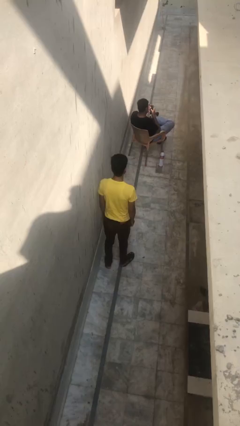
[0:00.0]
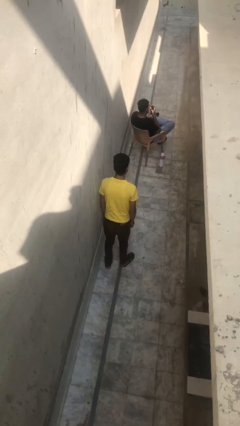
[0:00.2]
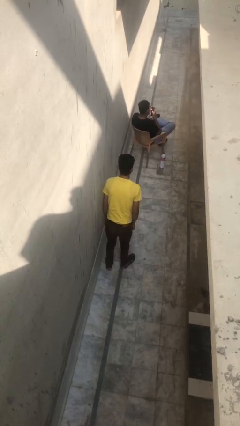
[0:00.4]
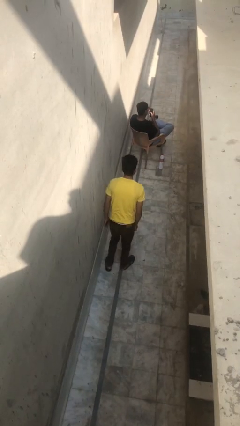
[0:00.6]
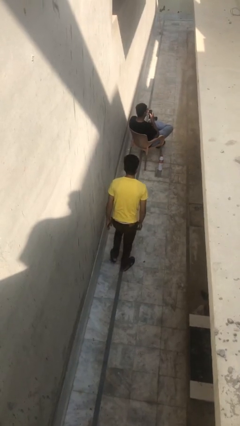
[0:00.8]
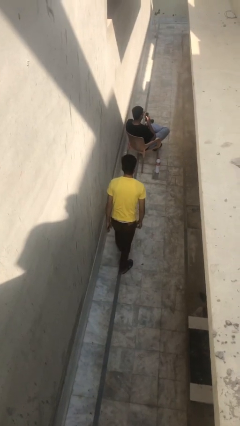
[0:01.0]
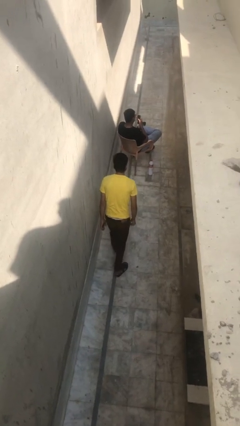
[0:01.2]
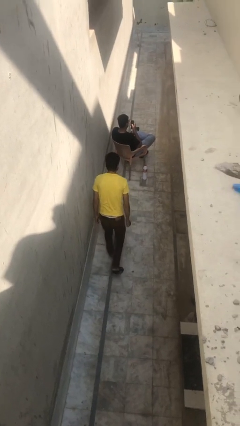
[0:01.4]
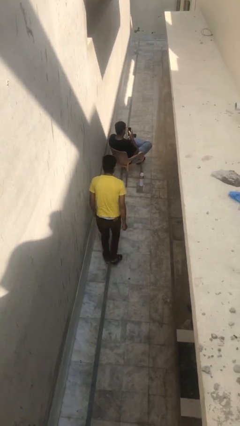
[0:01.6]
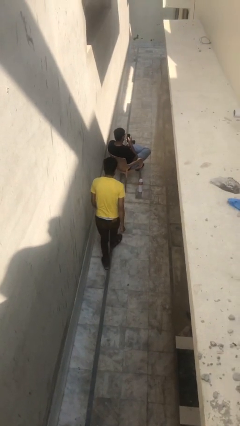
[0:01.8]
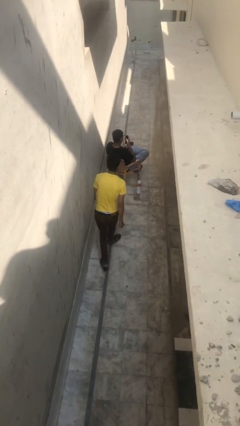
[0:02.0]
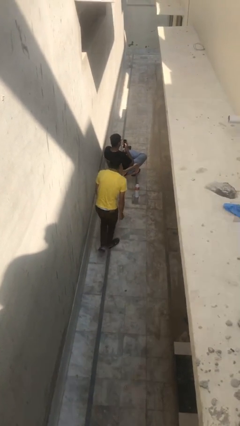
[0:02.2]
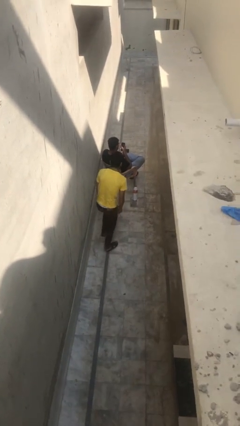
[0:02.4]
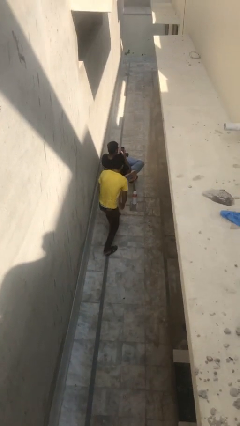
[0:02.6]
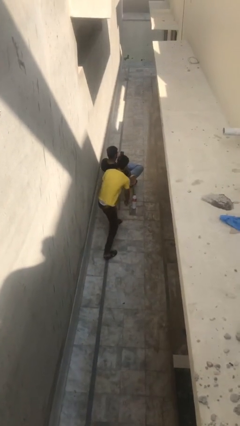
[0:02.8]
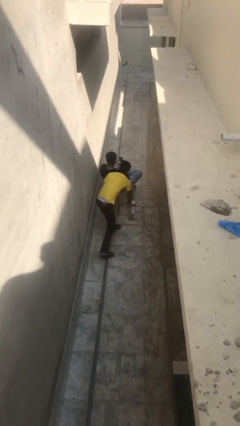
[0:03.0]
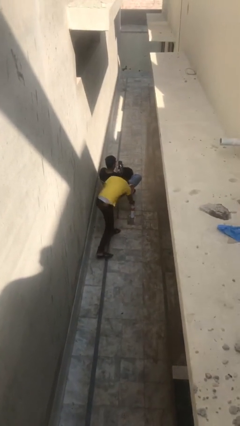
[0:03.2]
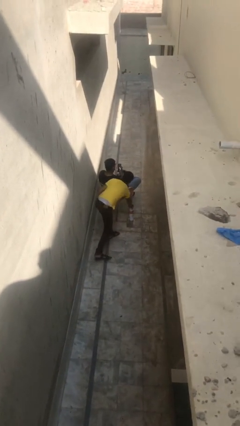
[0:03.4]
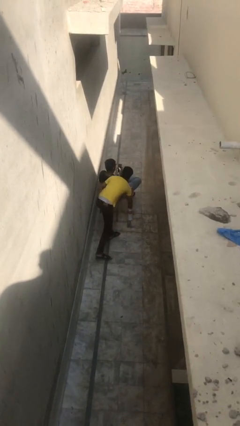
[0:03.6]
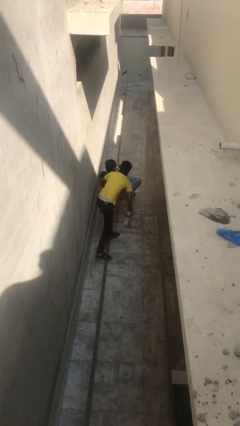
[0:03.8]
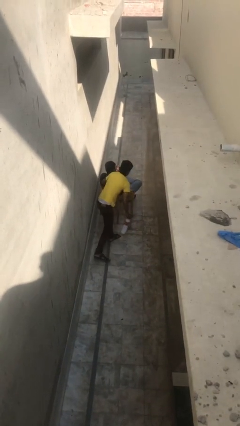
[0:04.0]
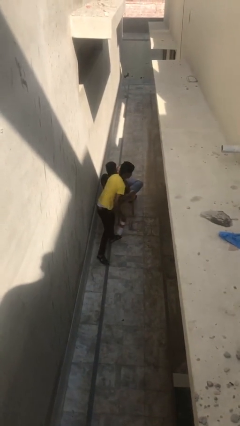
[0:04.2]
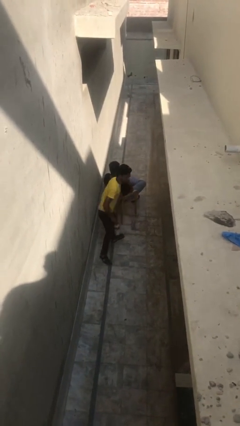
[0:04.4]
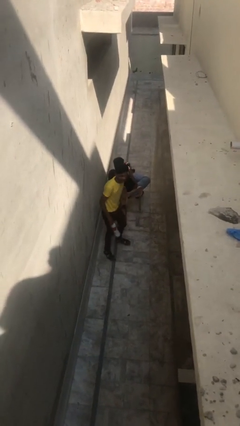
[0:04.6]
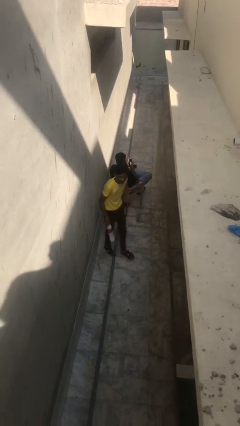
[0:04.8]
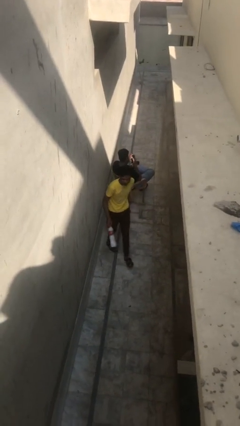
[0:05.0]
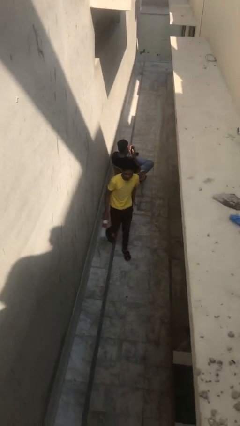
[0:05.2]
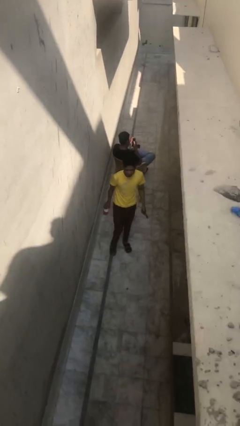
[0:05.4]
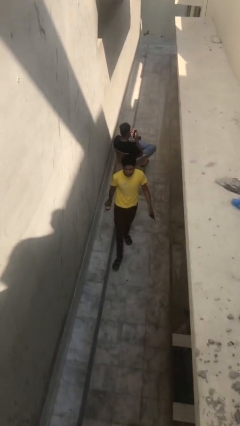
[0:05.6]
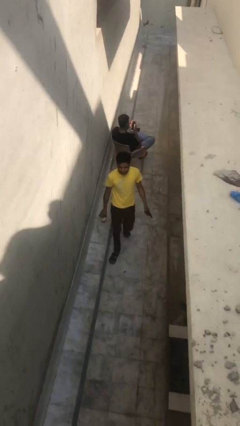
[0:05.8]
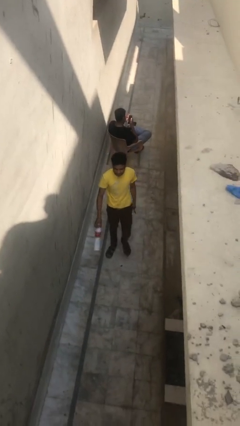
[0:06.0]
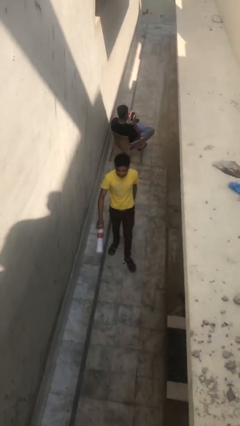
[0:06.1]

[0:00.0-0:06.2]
person steals object from person

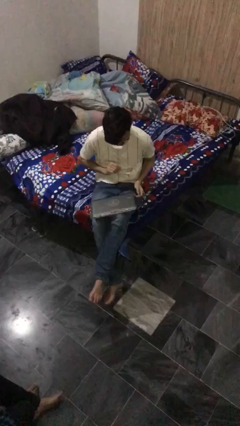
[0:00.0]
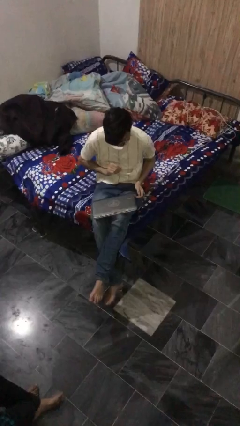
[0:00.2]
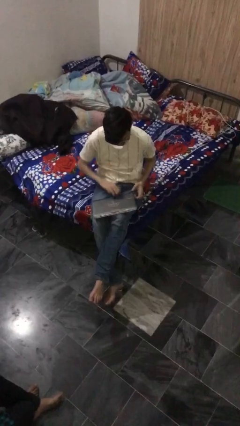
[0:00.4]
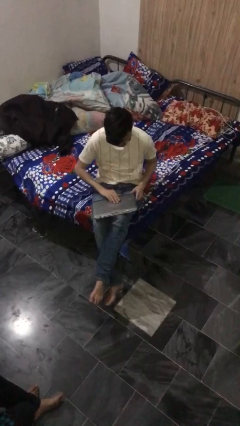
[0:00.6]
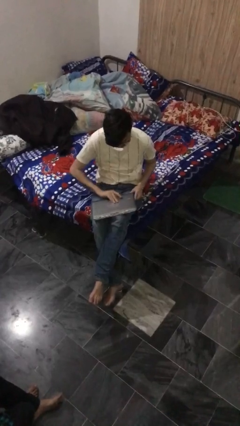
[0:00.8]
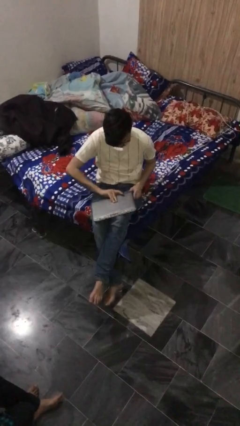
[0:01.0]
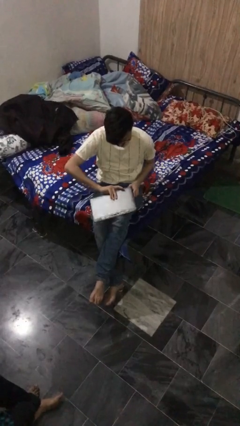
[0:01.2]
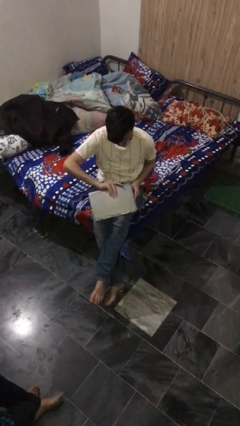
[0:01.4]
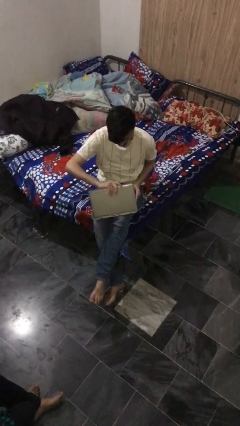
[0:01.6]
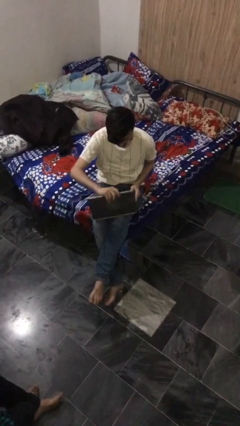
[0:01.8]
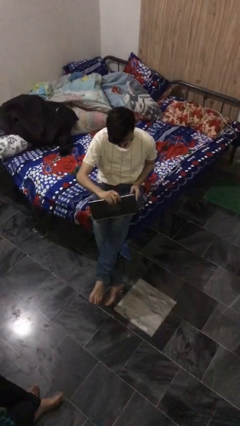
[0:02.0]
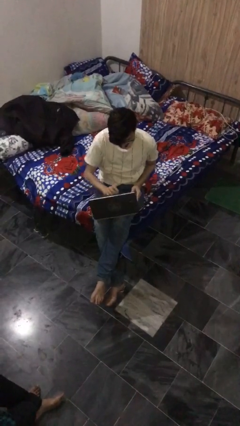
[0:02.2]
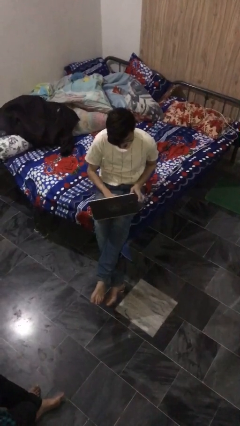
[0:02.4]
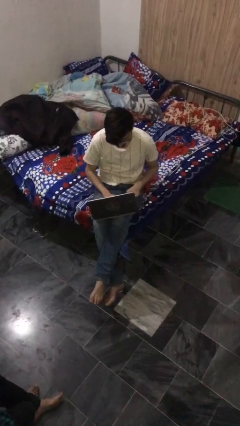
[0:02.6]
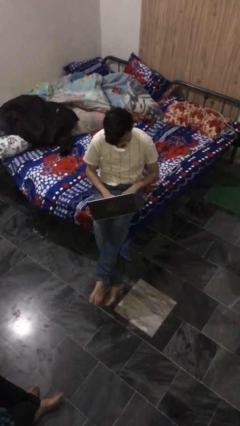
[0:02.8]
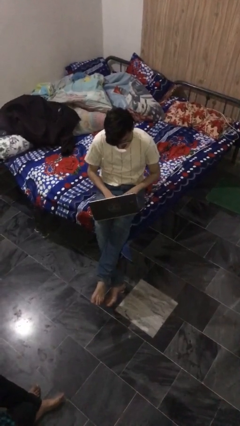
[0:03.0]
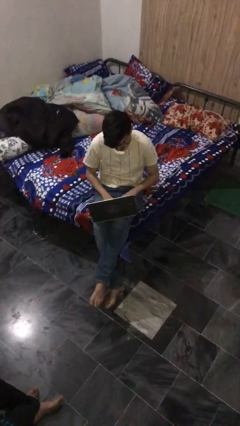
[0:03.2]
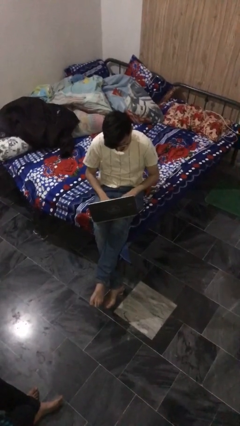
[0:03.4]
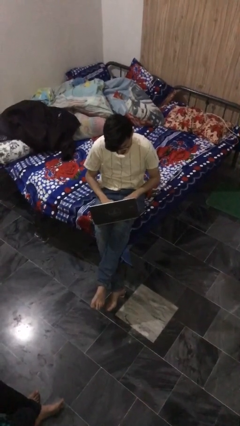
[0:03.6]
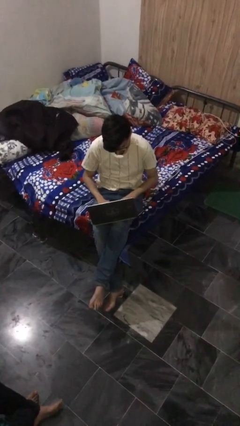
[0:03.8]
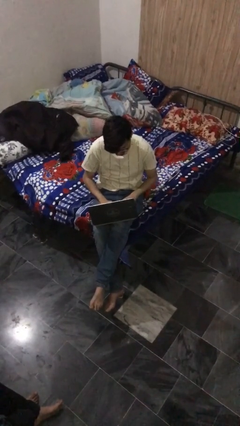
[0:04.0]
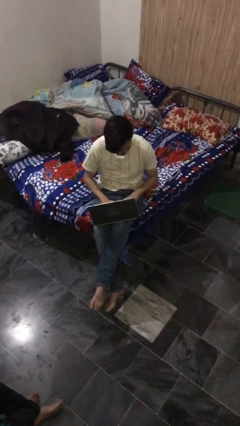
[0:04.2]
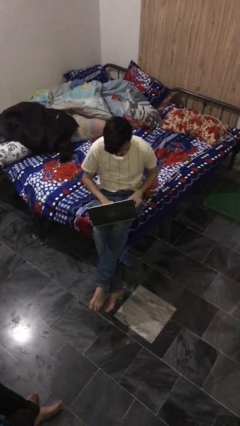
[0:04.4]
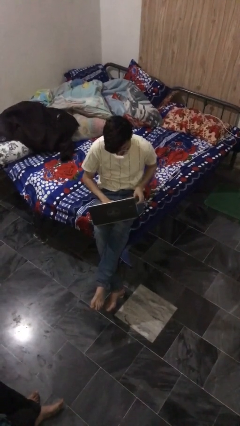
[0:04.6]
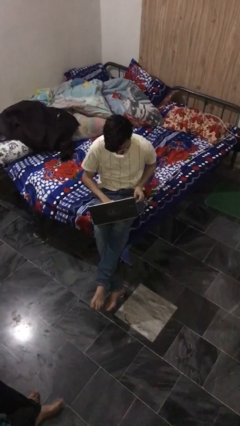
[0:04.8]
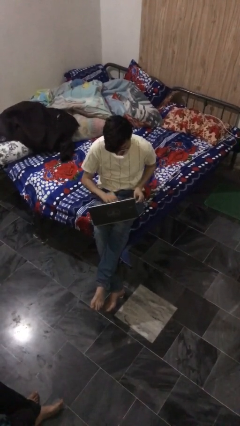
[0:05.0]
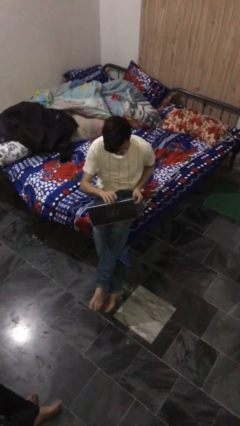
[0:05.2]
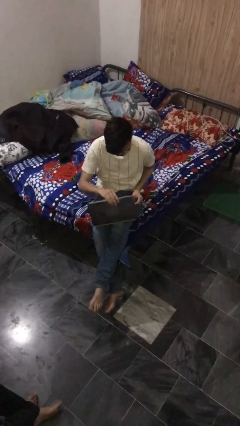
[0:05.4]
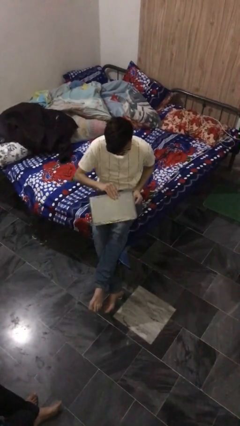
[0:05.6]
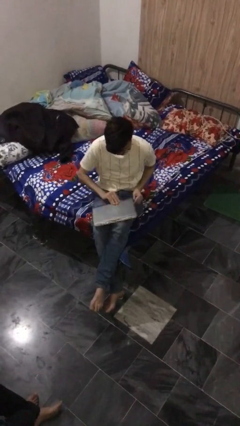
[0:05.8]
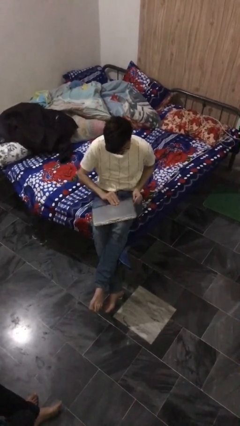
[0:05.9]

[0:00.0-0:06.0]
person interacts with laptop

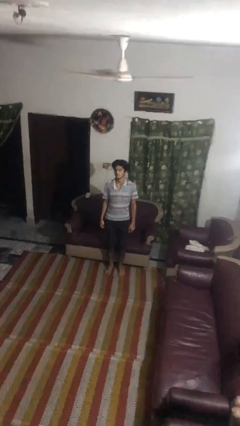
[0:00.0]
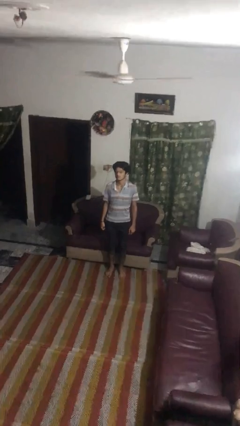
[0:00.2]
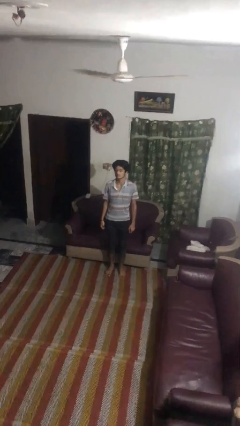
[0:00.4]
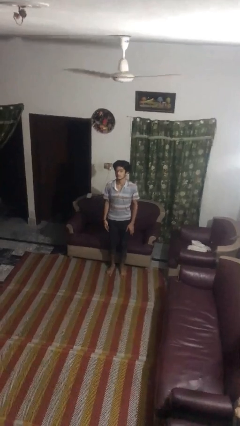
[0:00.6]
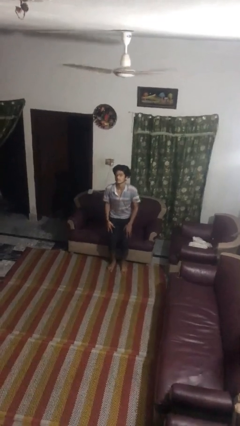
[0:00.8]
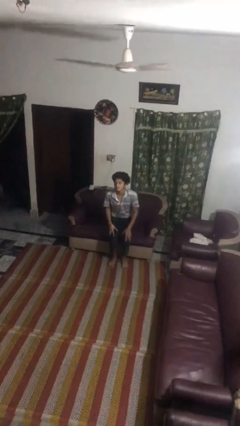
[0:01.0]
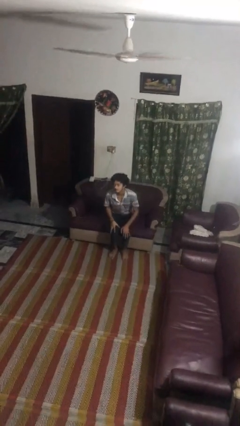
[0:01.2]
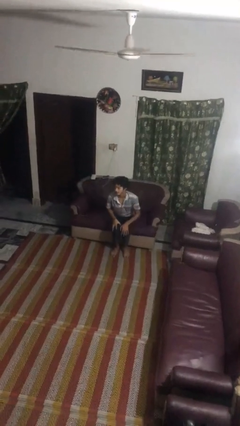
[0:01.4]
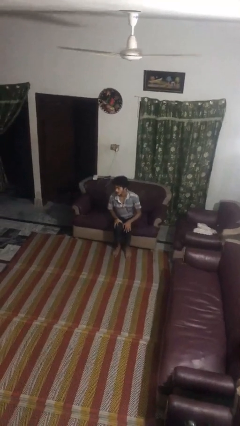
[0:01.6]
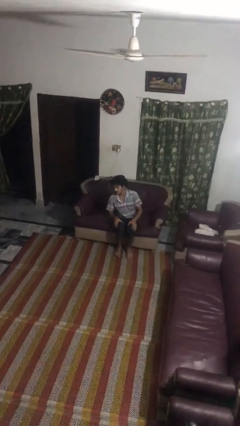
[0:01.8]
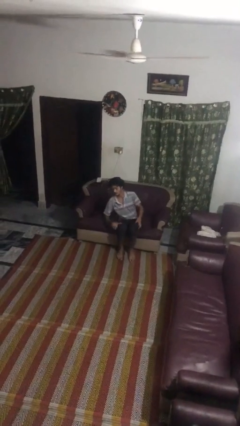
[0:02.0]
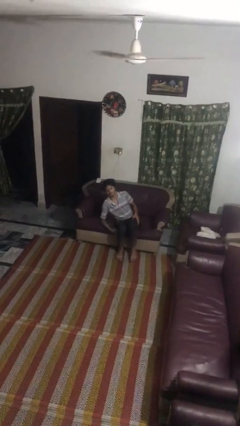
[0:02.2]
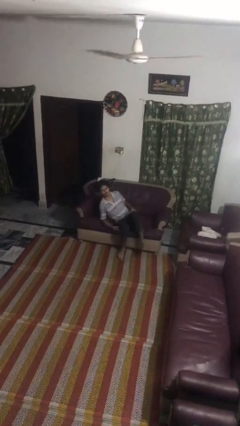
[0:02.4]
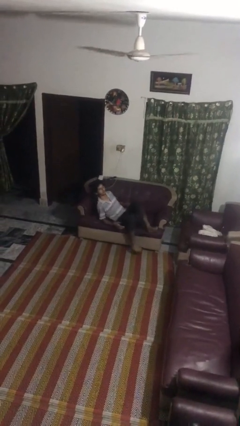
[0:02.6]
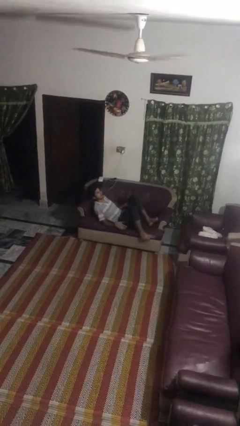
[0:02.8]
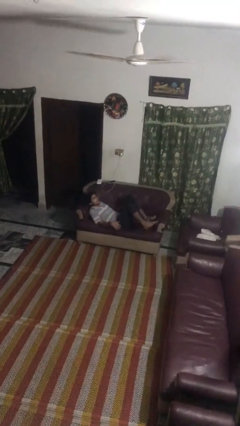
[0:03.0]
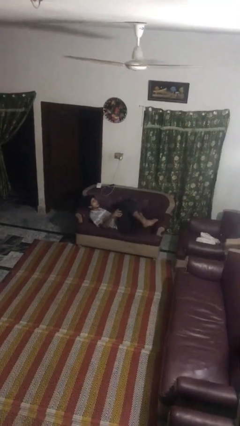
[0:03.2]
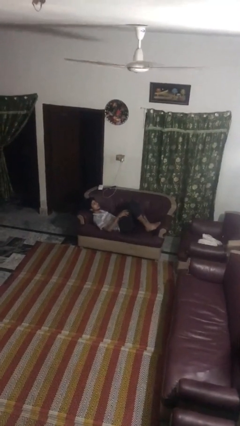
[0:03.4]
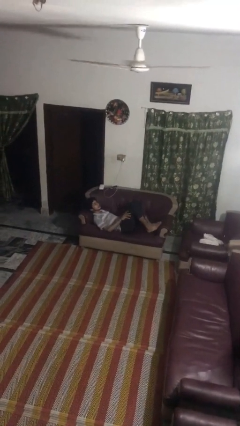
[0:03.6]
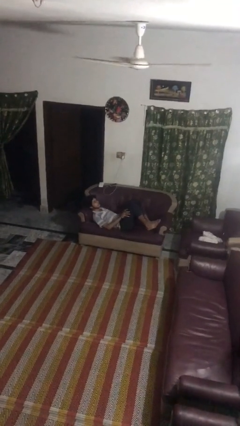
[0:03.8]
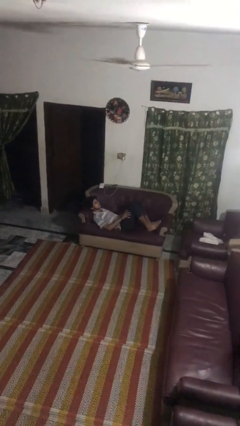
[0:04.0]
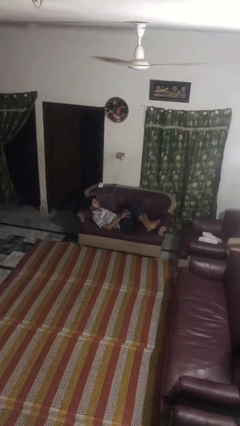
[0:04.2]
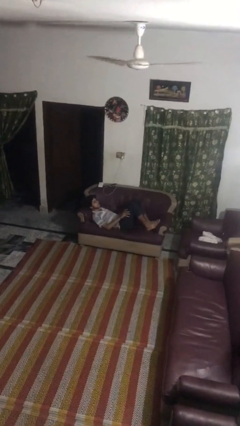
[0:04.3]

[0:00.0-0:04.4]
person lies down on couch

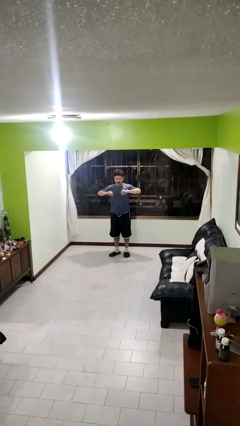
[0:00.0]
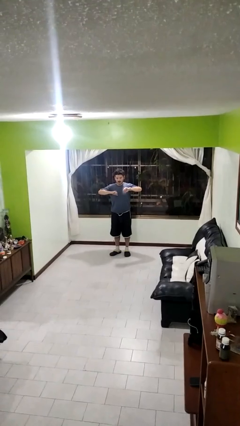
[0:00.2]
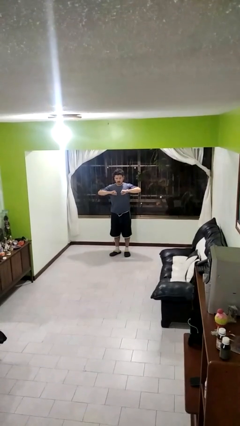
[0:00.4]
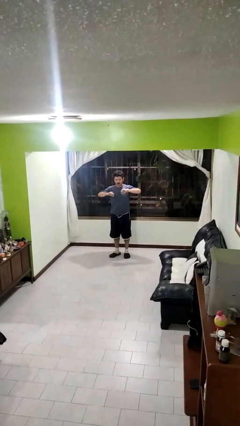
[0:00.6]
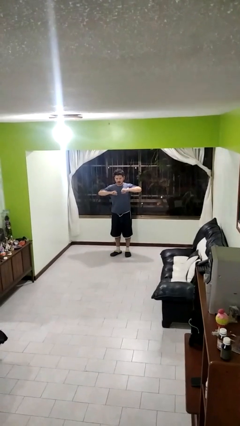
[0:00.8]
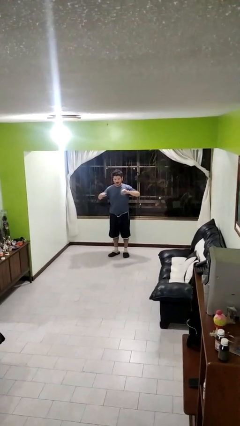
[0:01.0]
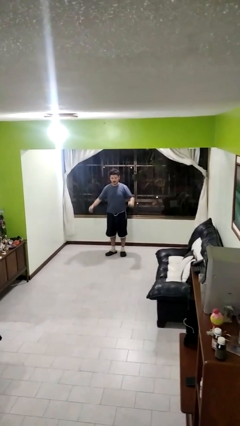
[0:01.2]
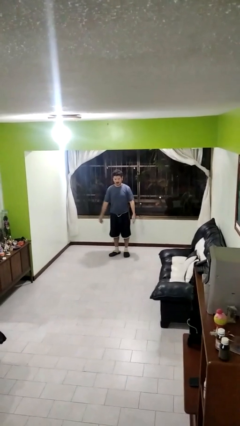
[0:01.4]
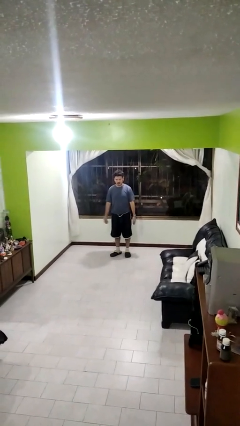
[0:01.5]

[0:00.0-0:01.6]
person drums on chest
